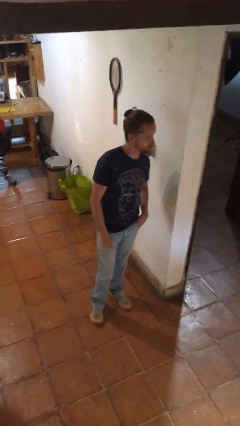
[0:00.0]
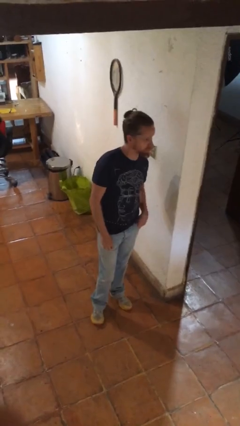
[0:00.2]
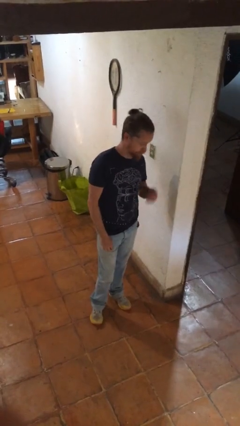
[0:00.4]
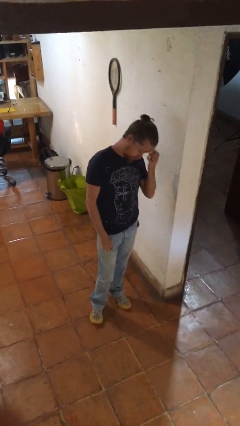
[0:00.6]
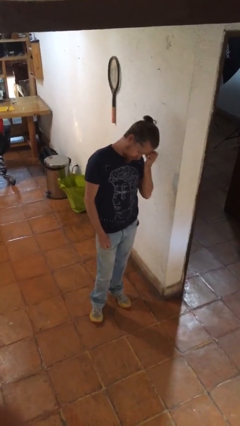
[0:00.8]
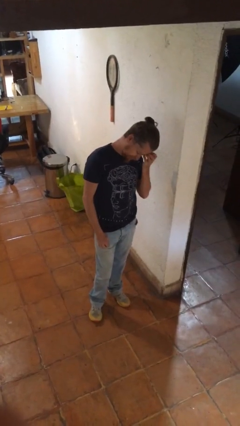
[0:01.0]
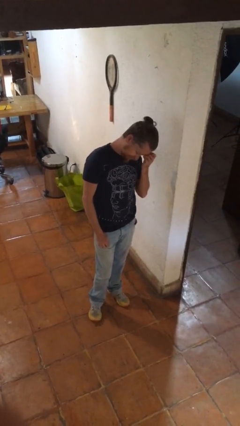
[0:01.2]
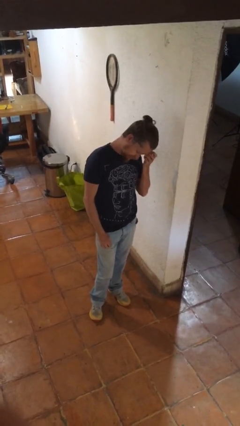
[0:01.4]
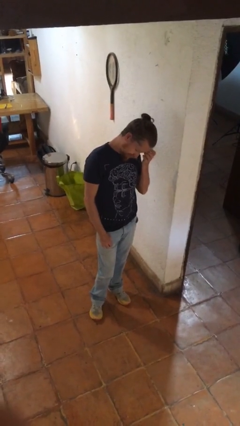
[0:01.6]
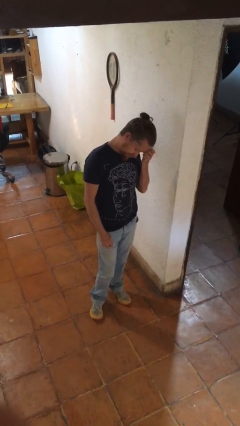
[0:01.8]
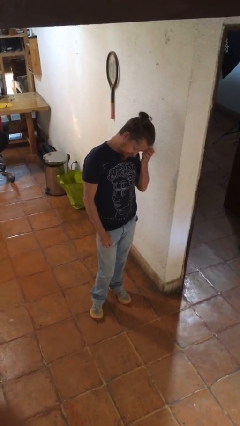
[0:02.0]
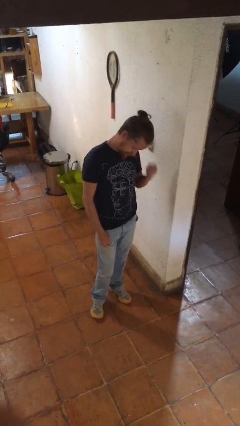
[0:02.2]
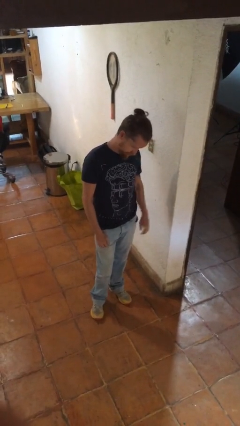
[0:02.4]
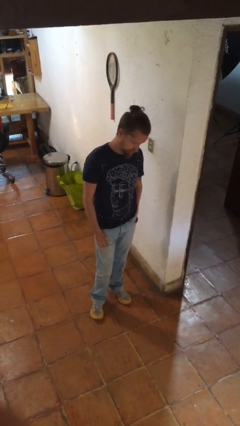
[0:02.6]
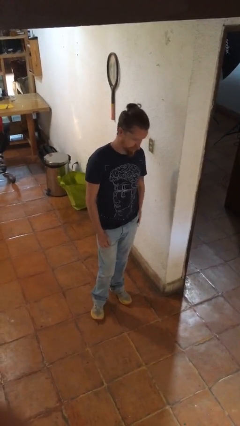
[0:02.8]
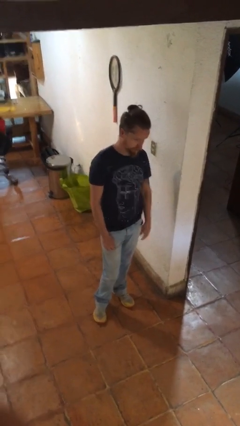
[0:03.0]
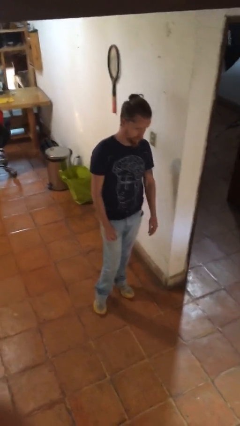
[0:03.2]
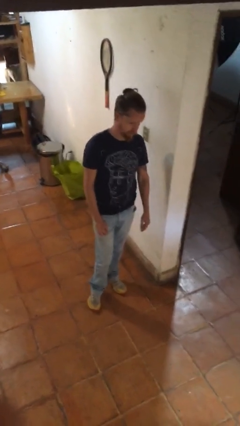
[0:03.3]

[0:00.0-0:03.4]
person scratches face

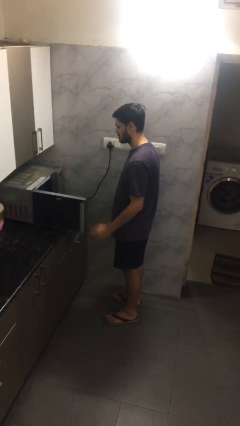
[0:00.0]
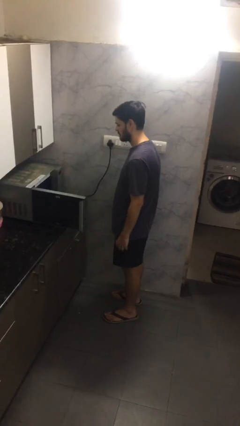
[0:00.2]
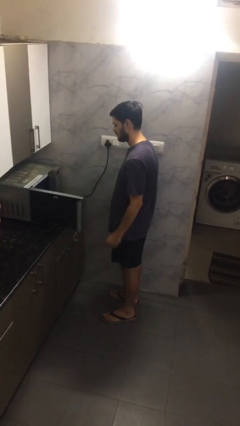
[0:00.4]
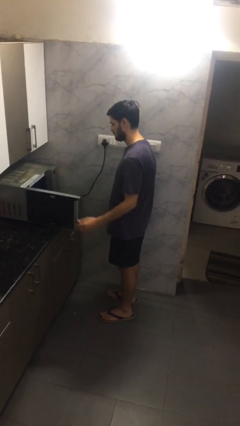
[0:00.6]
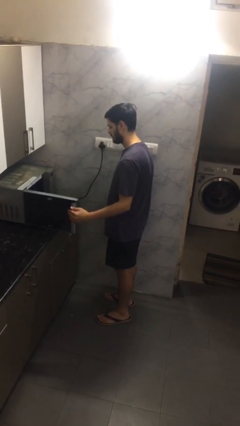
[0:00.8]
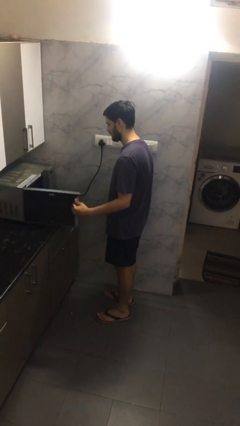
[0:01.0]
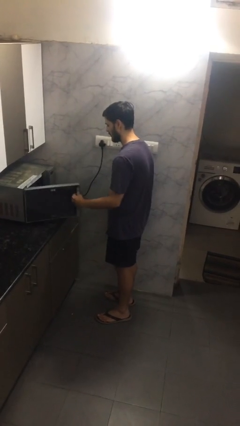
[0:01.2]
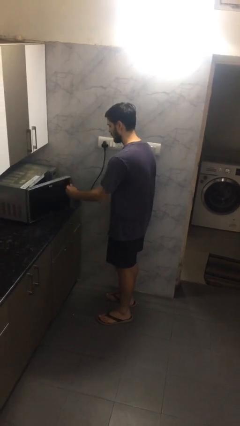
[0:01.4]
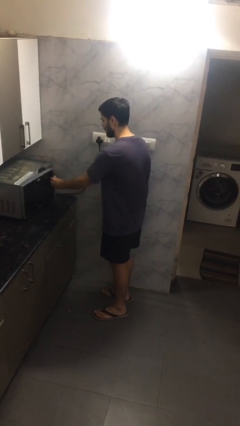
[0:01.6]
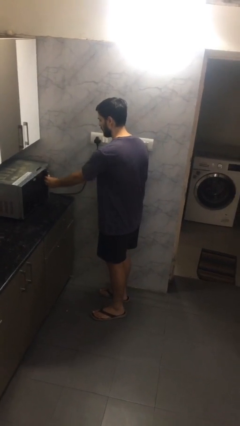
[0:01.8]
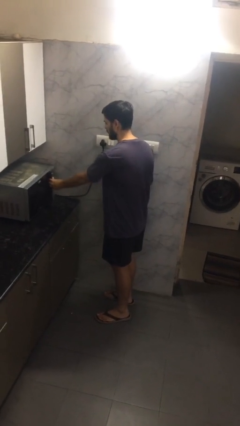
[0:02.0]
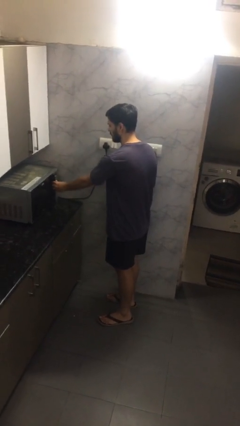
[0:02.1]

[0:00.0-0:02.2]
person closes microwave

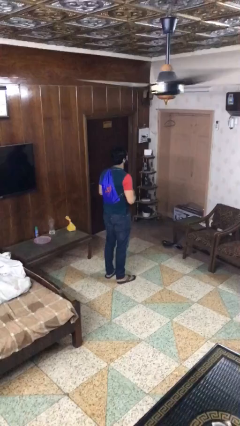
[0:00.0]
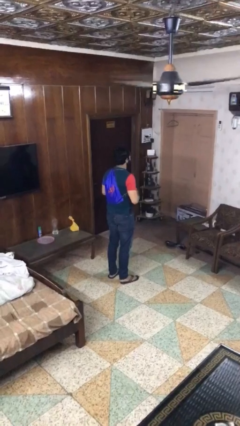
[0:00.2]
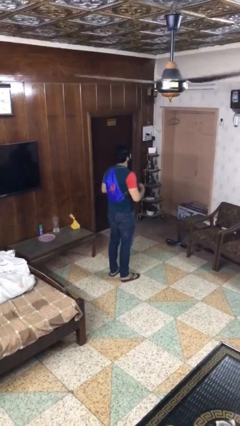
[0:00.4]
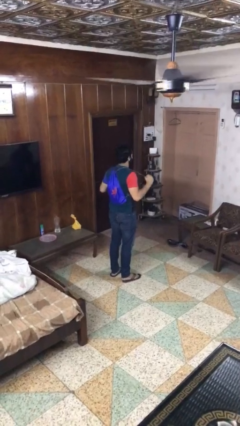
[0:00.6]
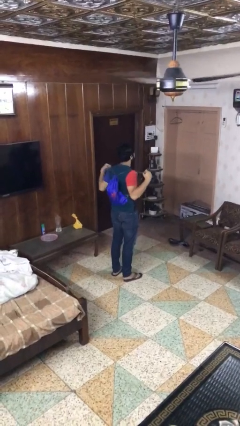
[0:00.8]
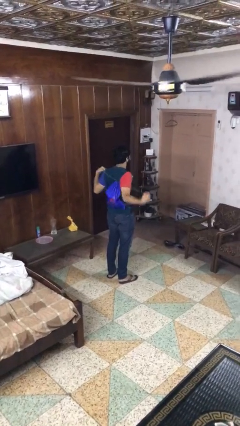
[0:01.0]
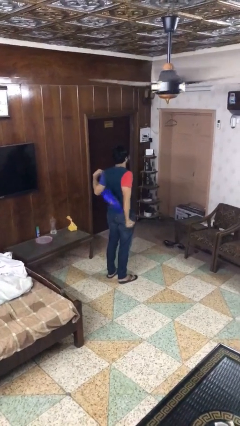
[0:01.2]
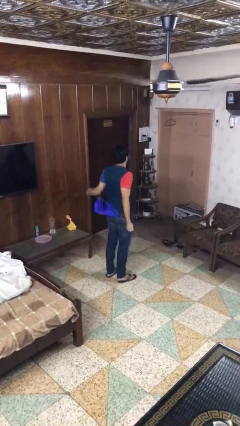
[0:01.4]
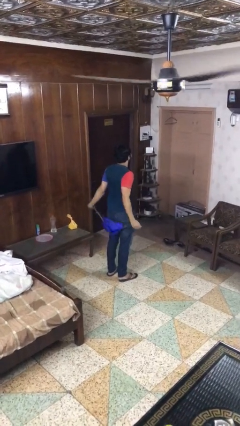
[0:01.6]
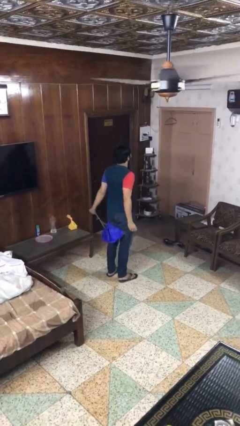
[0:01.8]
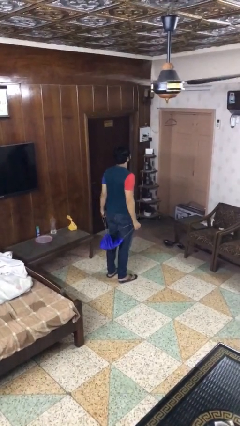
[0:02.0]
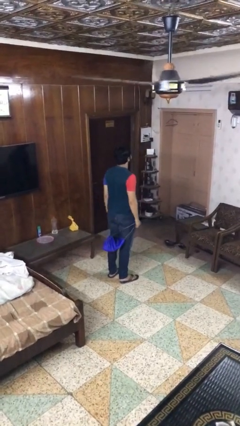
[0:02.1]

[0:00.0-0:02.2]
person takes off backpack

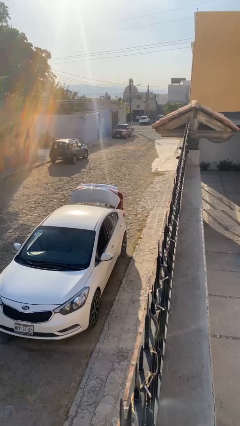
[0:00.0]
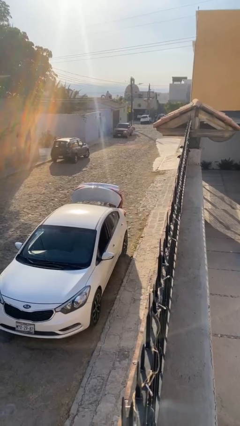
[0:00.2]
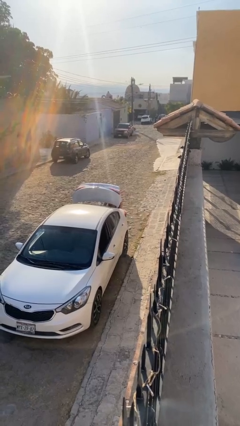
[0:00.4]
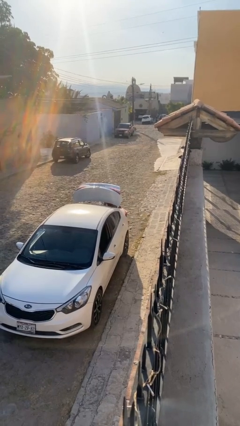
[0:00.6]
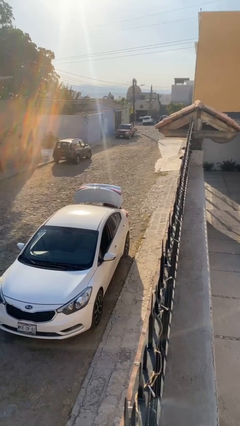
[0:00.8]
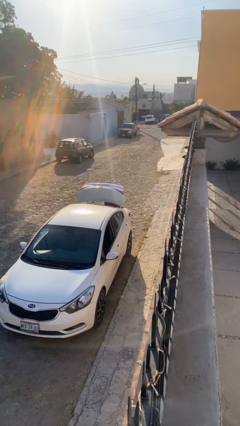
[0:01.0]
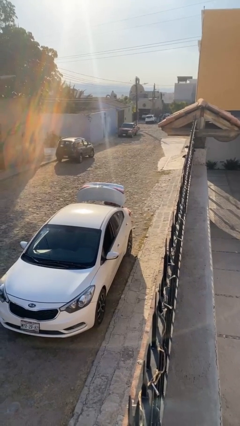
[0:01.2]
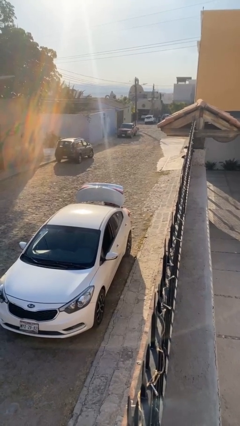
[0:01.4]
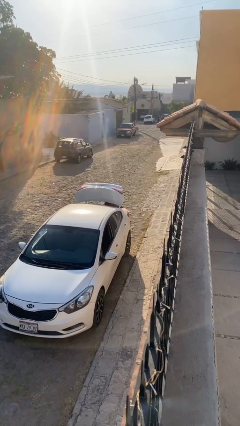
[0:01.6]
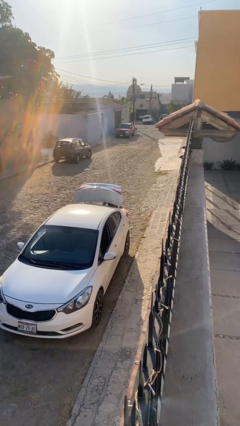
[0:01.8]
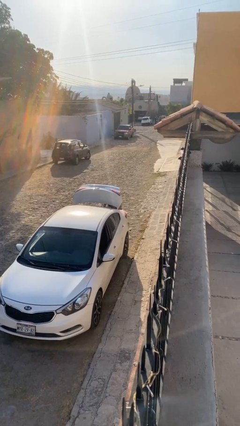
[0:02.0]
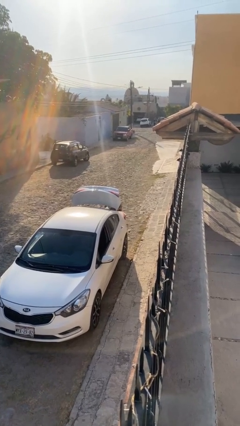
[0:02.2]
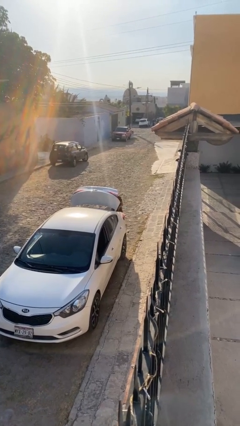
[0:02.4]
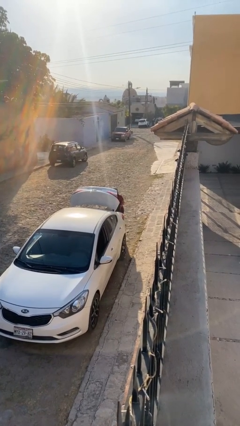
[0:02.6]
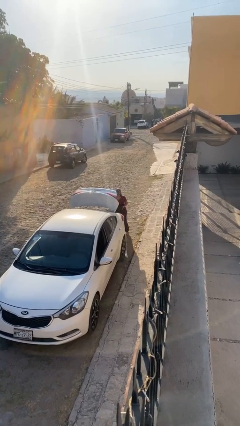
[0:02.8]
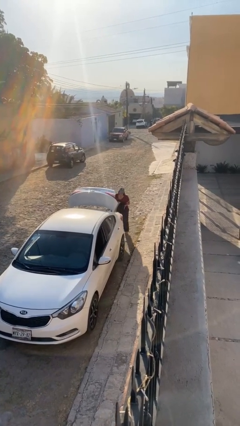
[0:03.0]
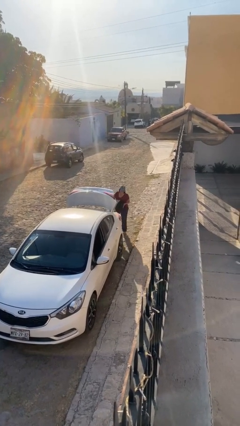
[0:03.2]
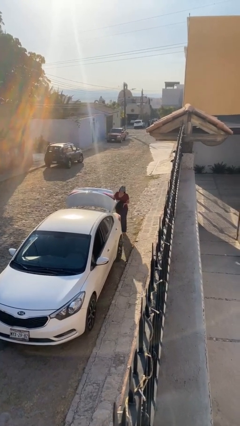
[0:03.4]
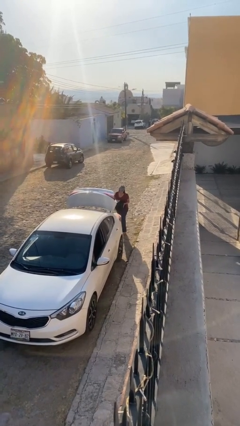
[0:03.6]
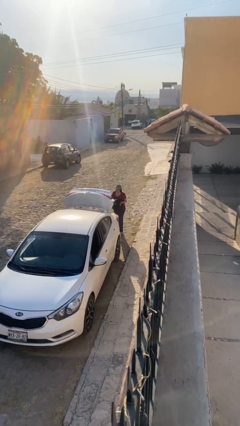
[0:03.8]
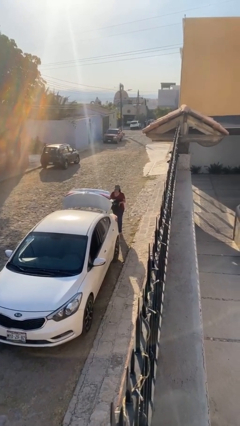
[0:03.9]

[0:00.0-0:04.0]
person unloads car

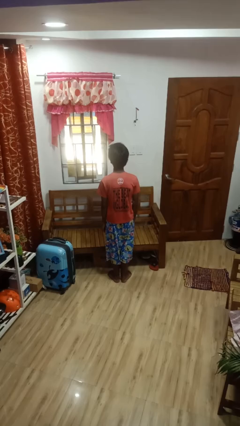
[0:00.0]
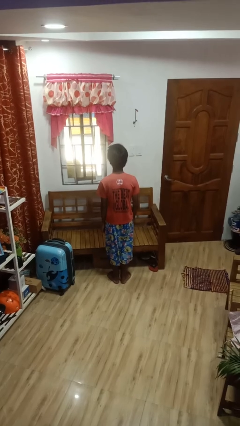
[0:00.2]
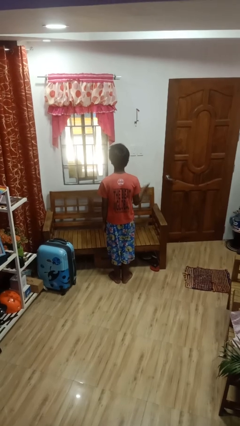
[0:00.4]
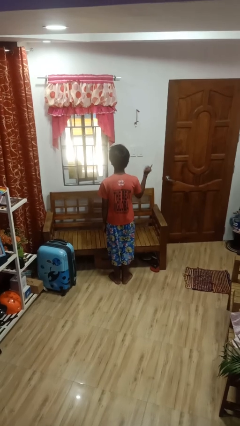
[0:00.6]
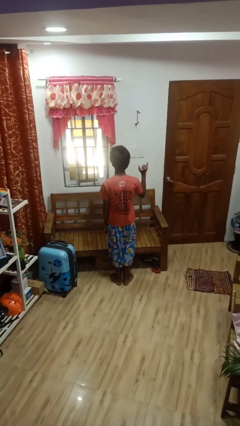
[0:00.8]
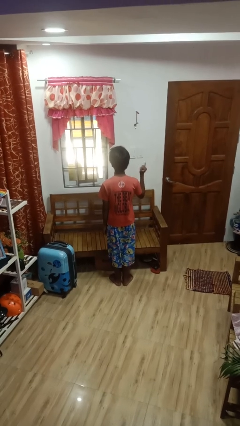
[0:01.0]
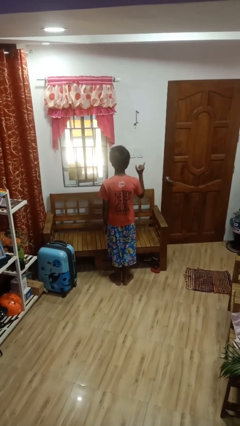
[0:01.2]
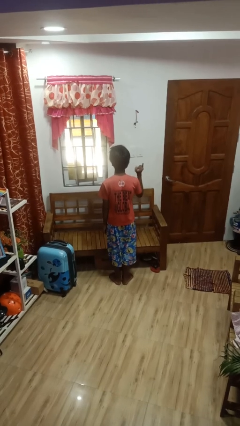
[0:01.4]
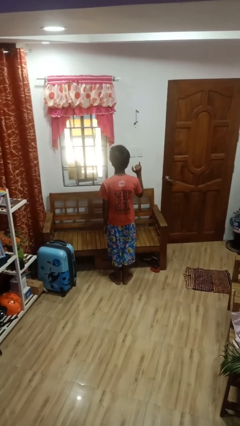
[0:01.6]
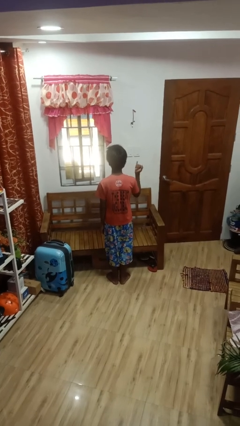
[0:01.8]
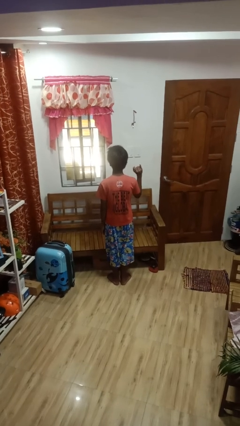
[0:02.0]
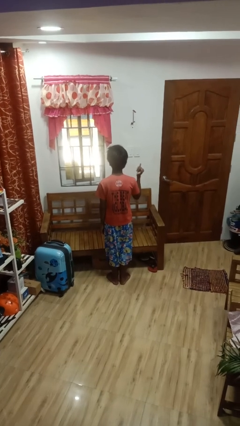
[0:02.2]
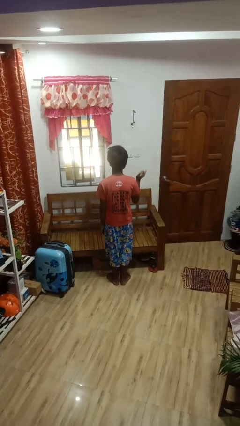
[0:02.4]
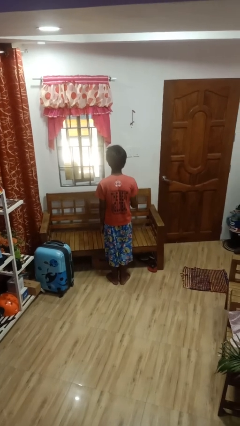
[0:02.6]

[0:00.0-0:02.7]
person gestures hang loose

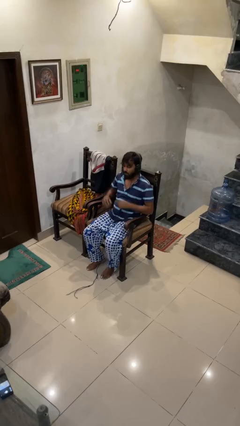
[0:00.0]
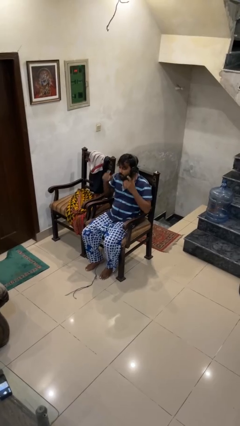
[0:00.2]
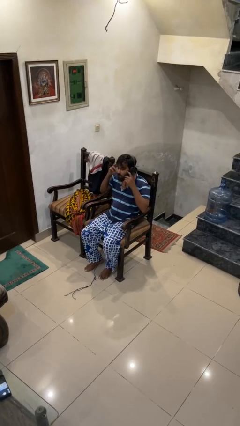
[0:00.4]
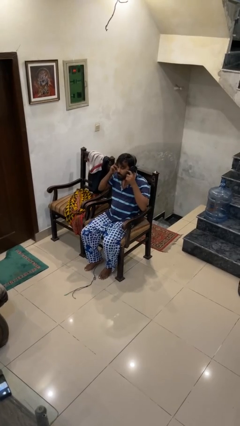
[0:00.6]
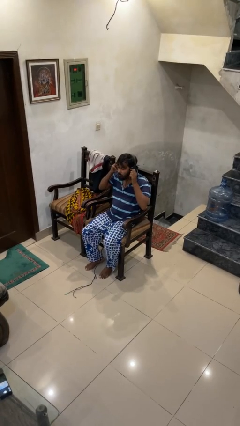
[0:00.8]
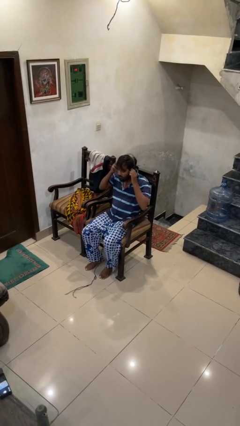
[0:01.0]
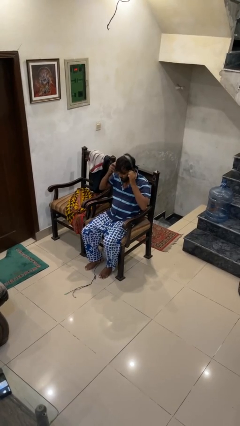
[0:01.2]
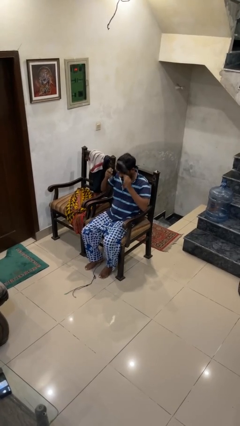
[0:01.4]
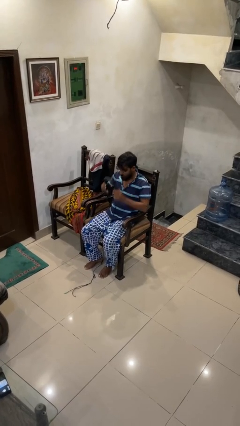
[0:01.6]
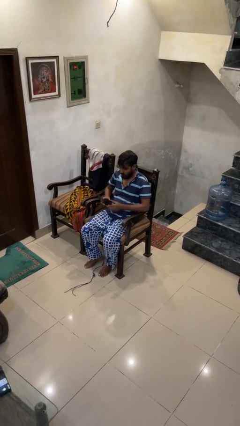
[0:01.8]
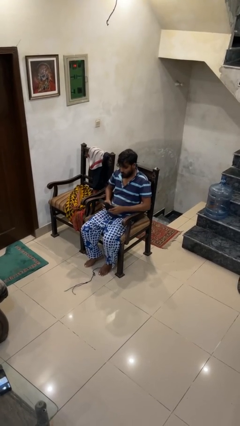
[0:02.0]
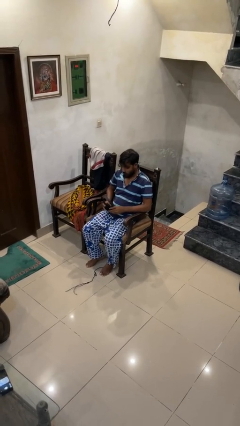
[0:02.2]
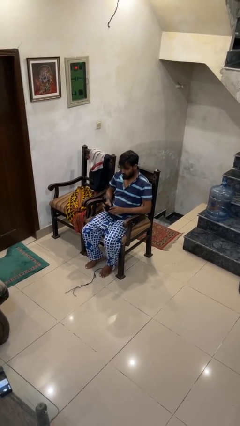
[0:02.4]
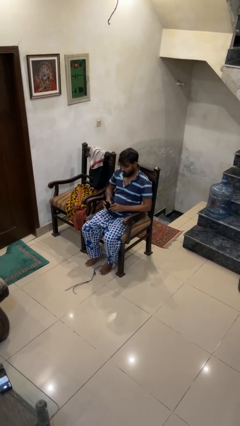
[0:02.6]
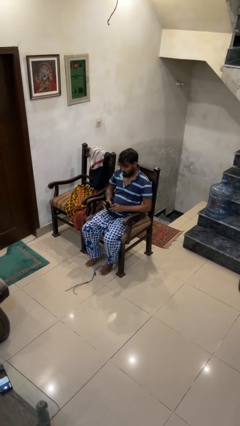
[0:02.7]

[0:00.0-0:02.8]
person takes off headphones
